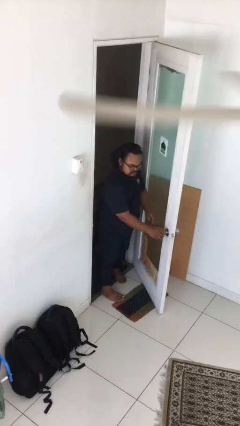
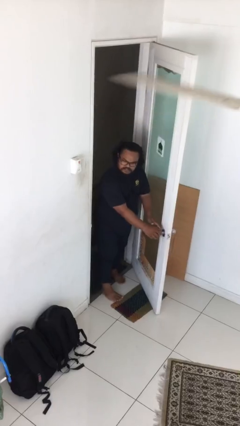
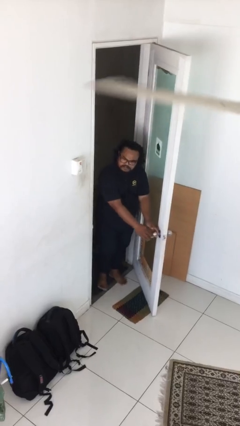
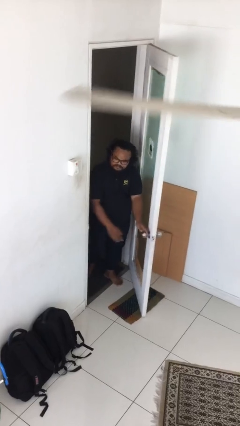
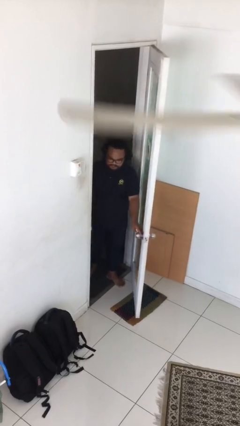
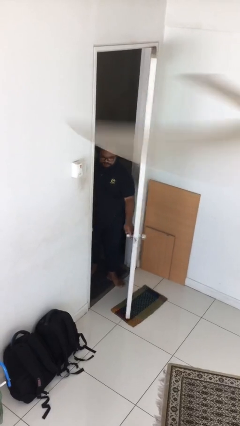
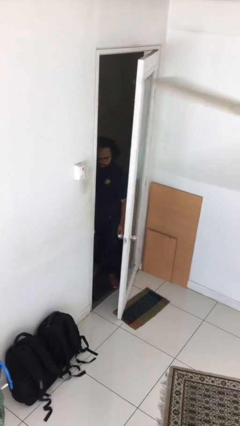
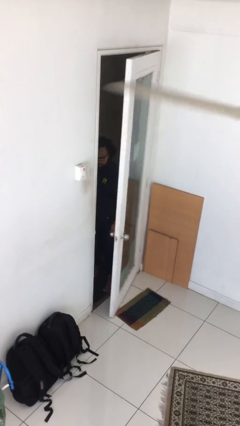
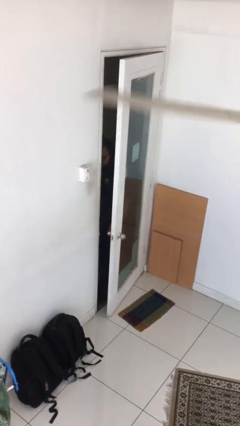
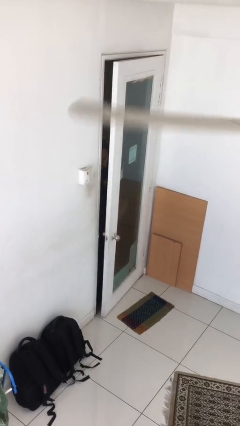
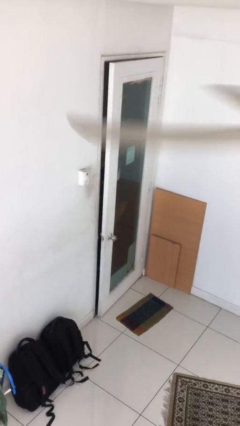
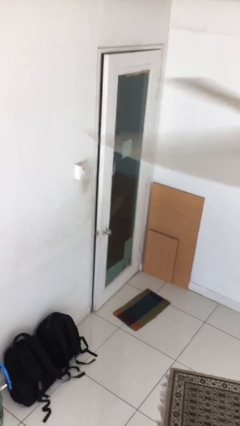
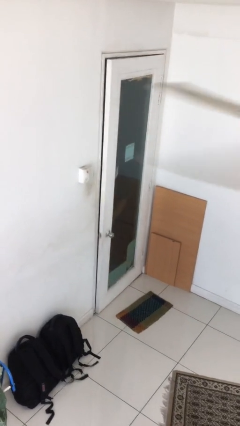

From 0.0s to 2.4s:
person closes facility door

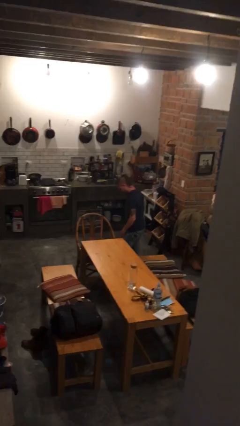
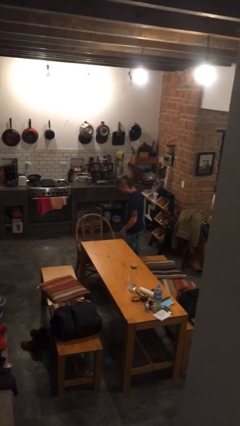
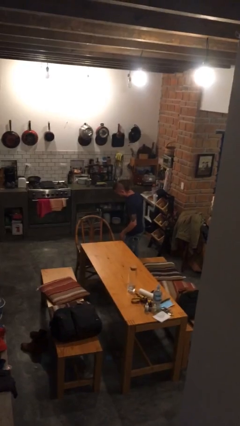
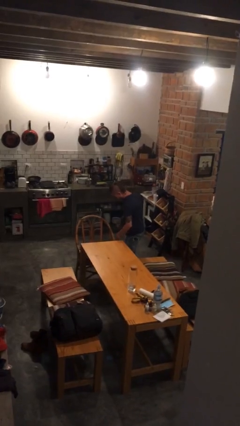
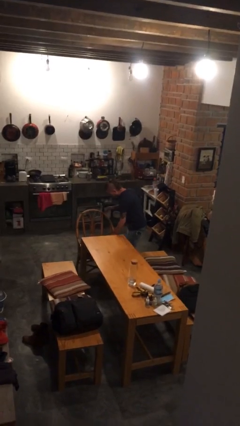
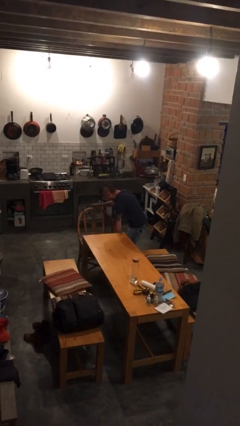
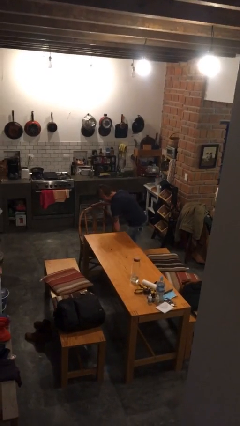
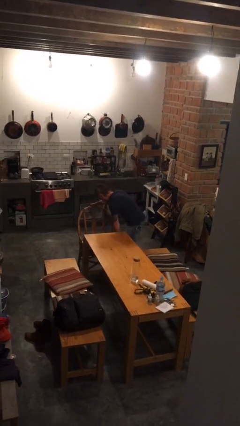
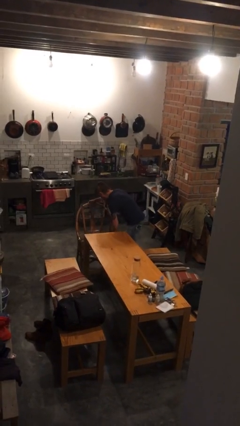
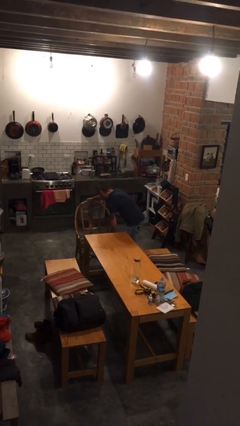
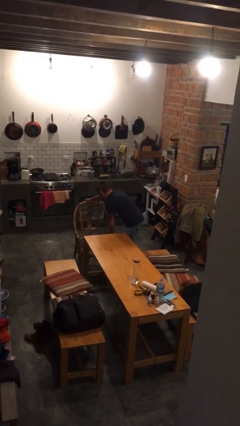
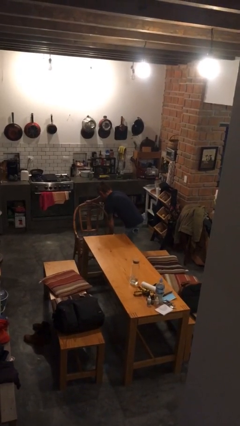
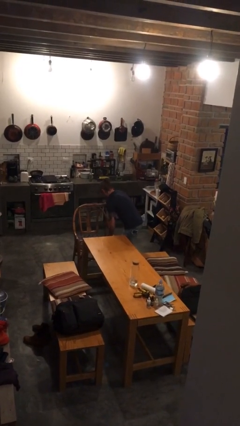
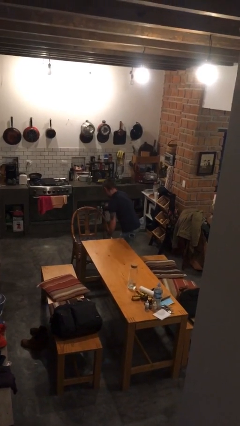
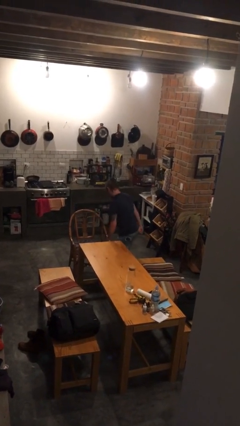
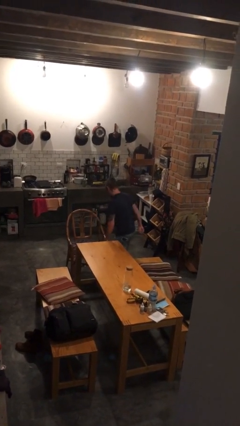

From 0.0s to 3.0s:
person pulls out chair

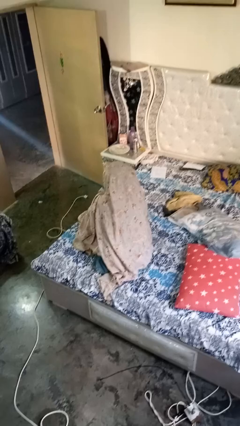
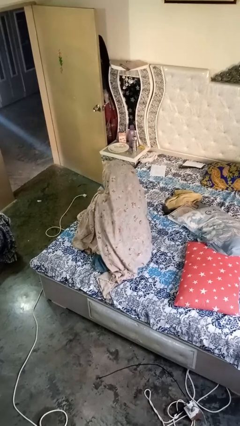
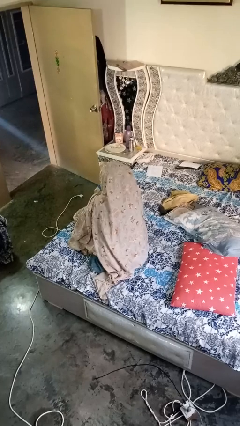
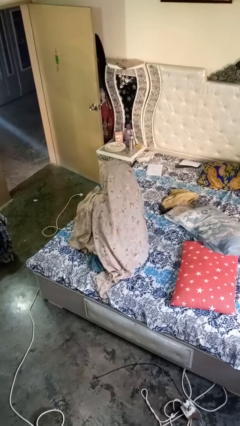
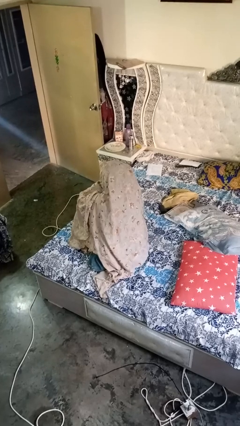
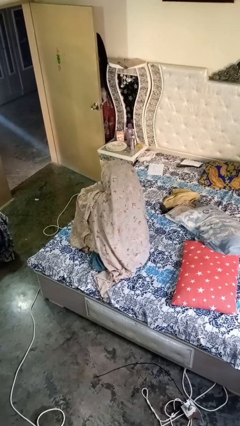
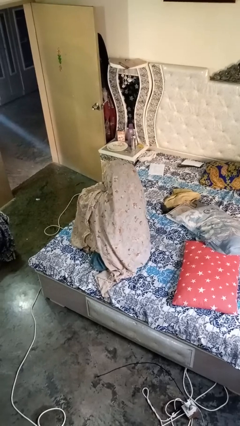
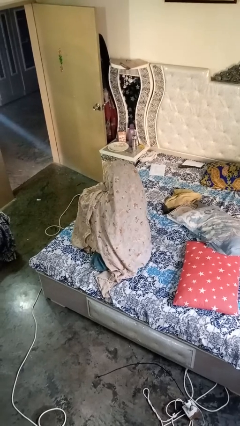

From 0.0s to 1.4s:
person looks at wristwatch

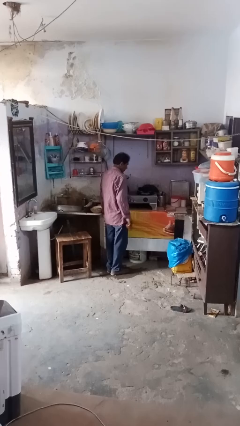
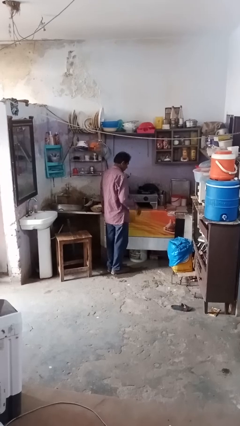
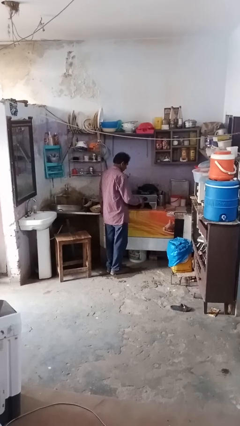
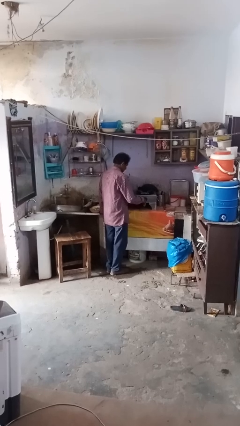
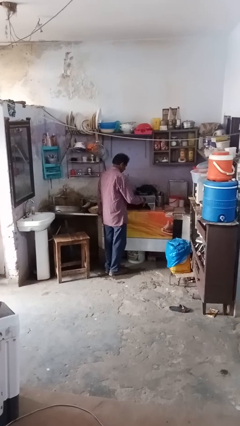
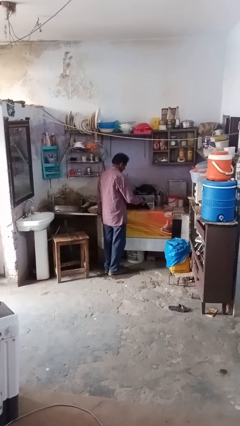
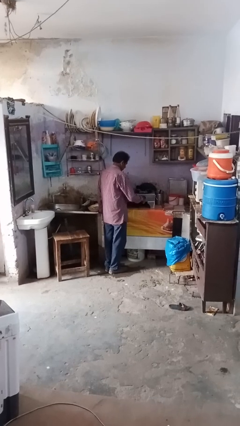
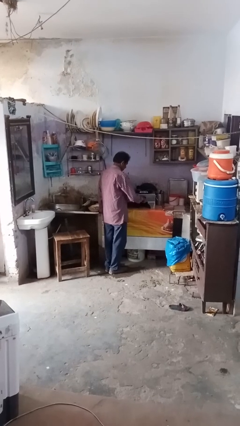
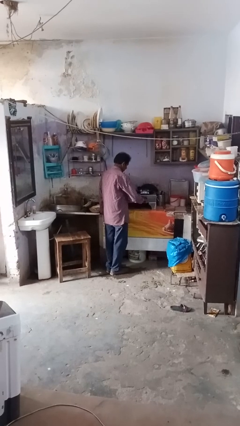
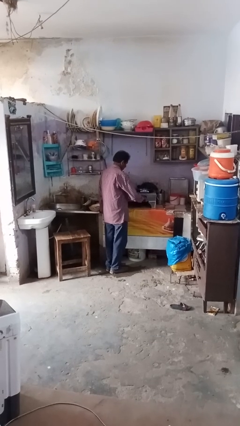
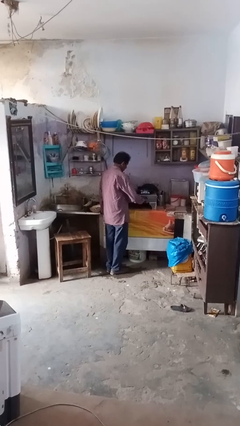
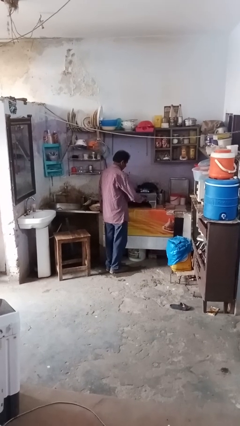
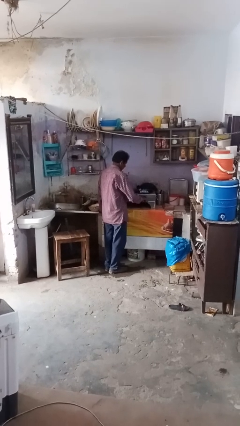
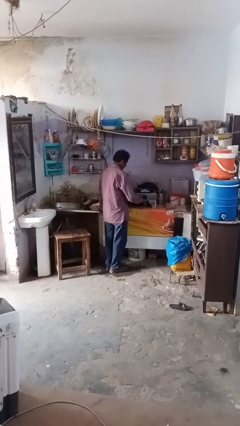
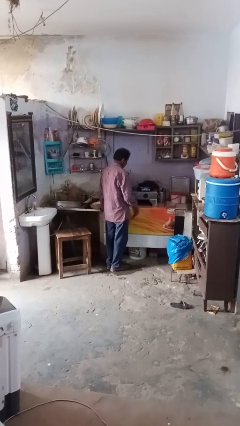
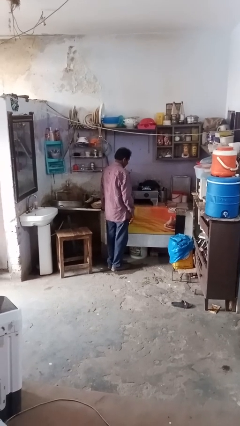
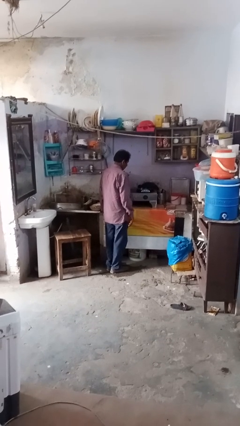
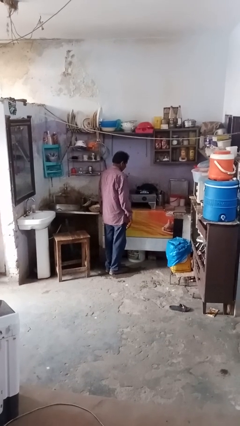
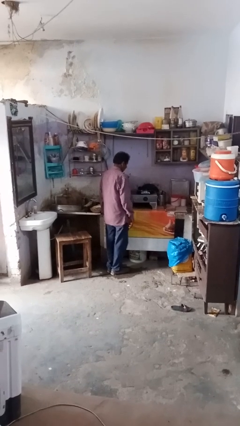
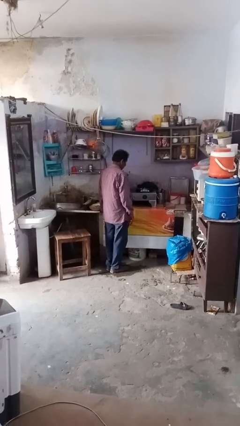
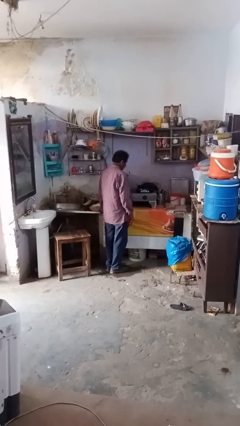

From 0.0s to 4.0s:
person turns on stovetop

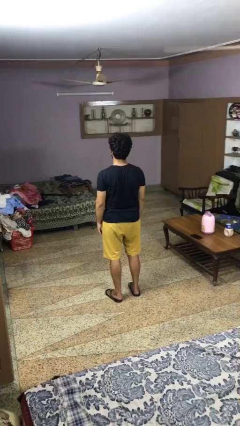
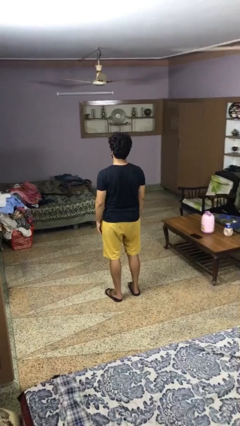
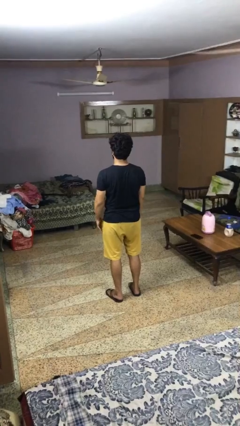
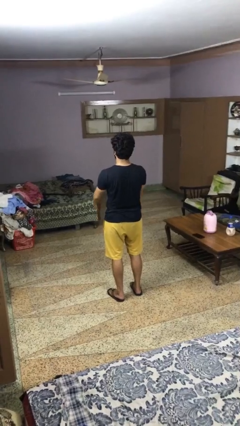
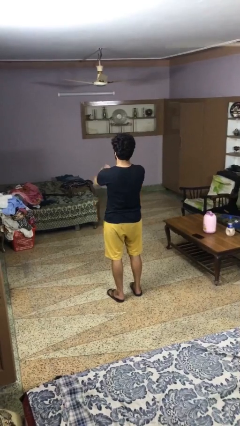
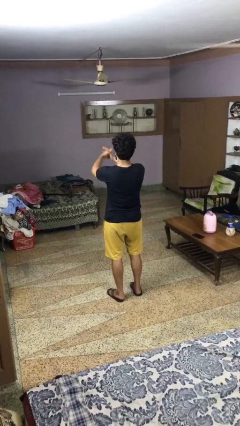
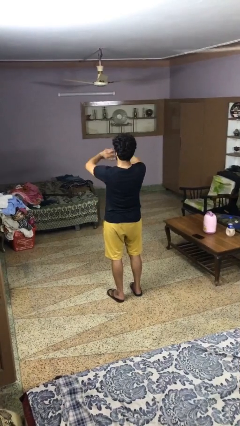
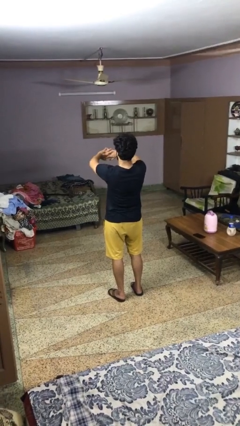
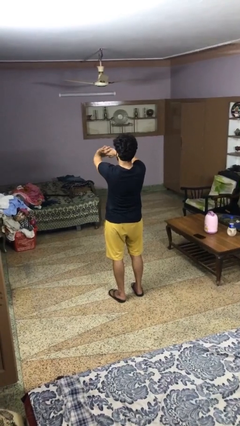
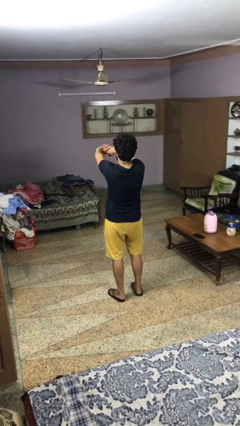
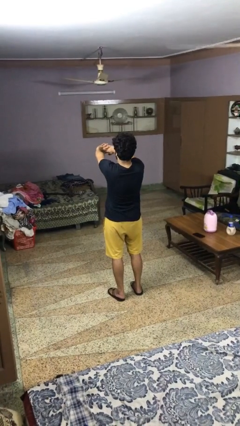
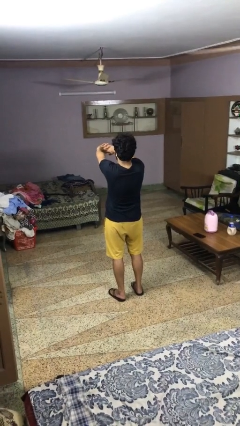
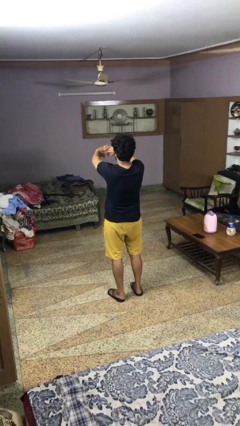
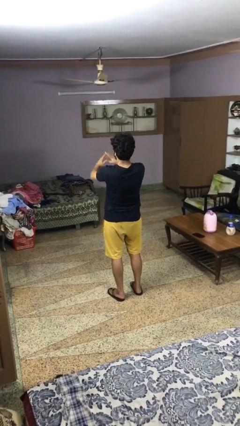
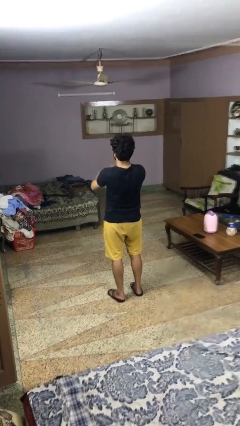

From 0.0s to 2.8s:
person cracks knuckles

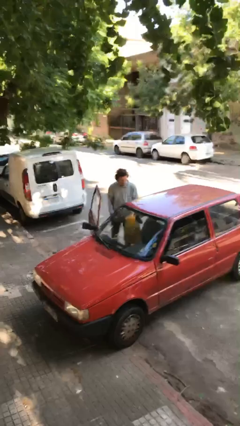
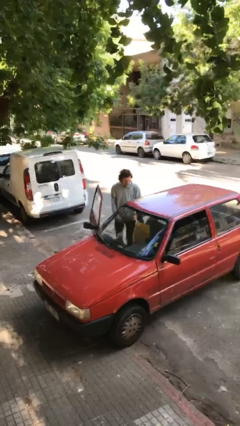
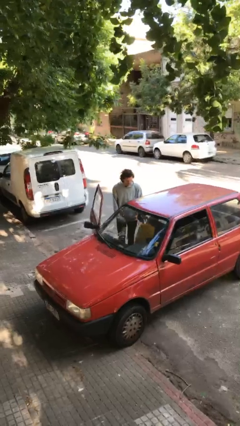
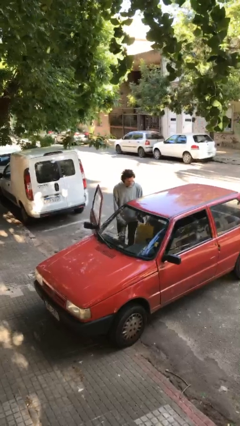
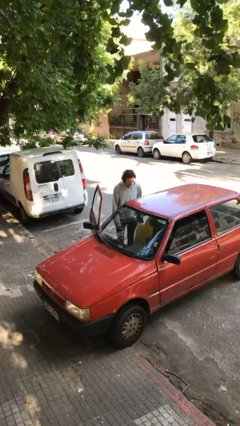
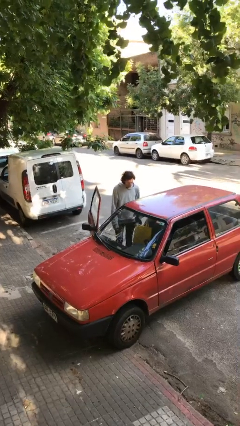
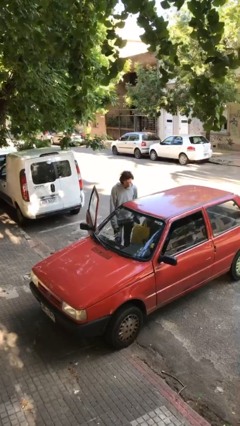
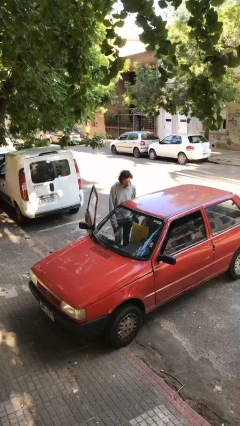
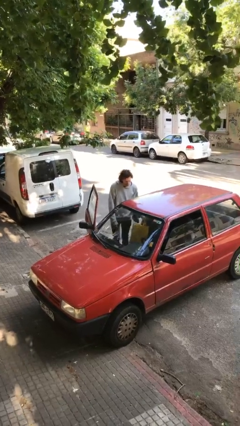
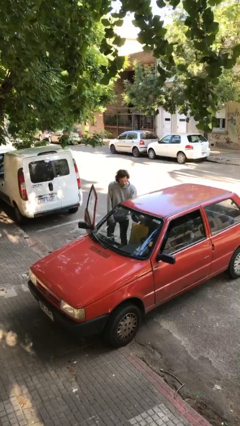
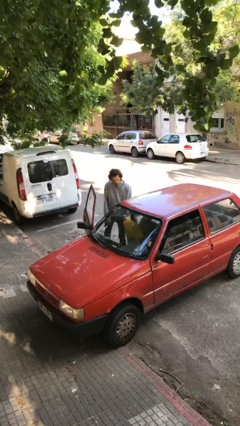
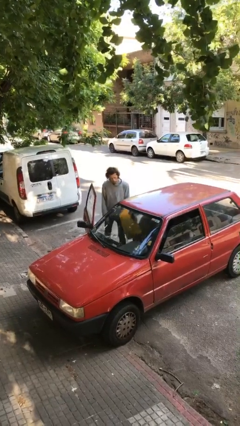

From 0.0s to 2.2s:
person loads car

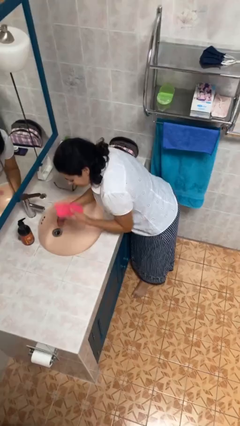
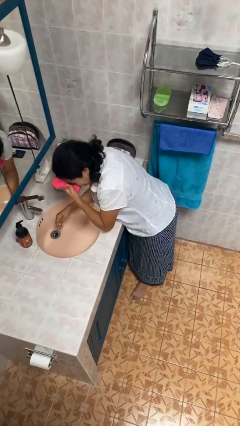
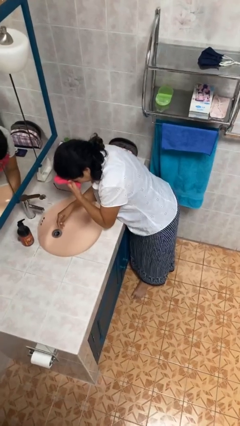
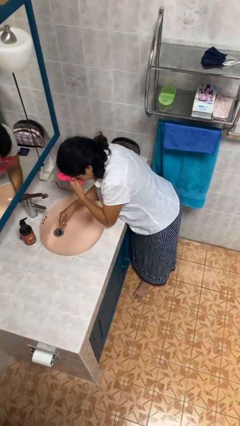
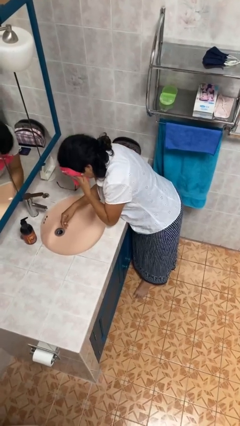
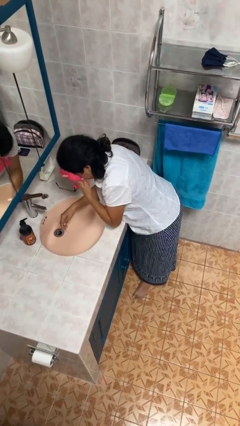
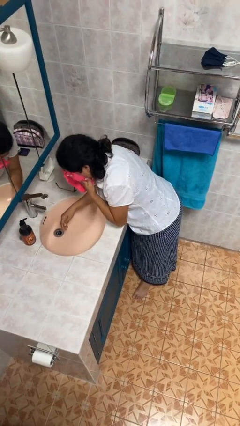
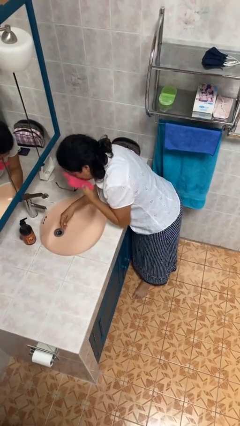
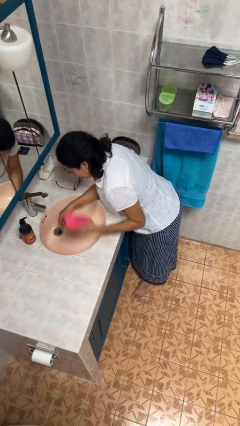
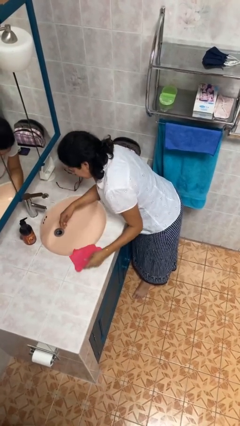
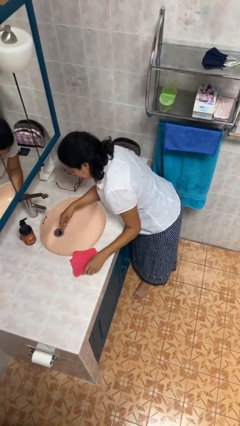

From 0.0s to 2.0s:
person dries face with towel
